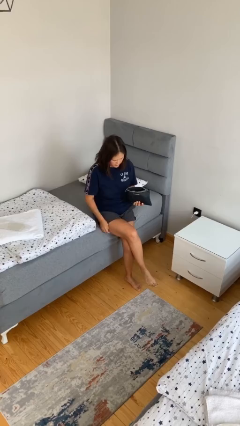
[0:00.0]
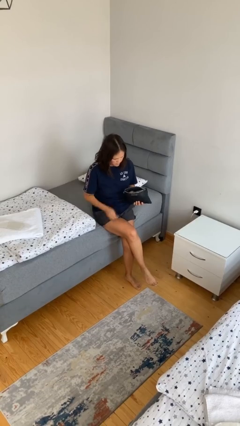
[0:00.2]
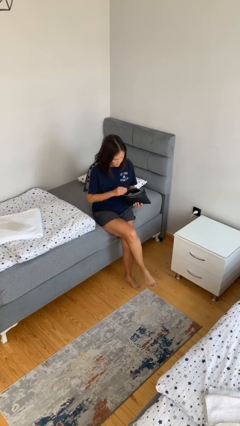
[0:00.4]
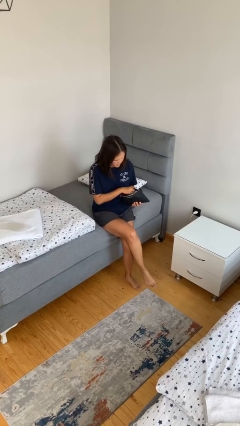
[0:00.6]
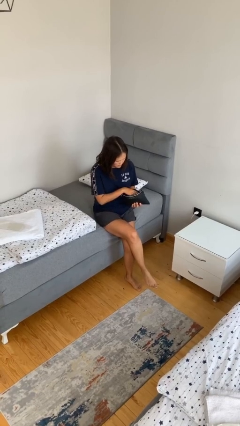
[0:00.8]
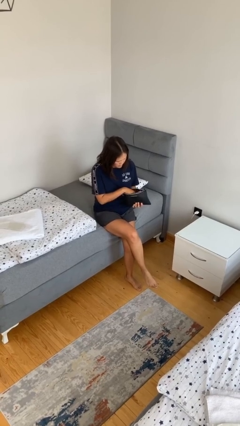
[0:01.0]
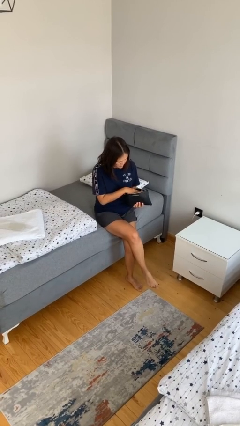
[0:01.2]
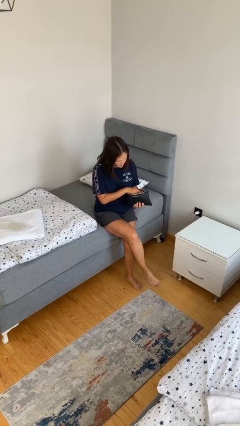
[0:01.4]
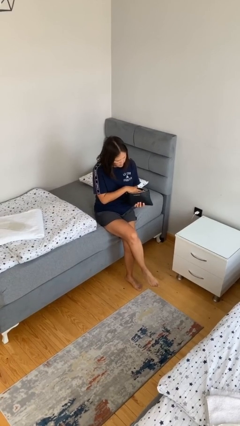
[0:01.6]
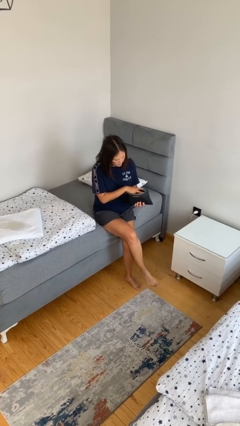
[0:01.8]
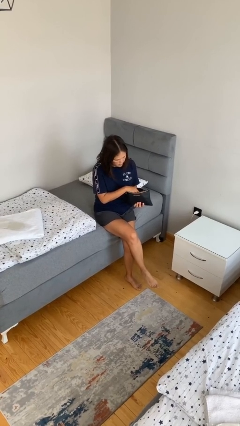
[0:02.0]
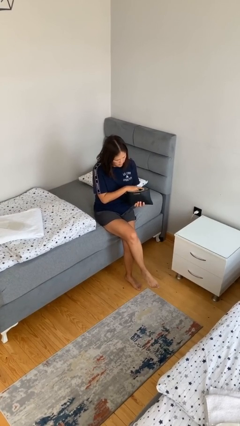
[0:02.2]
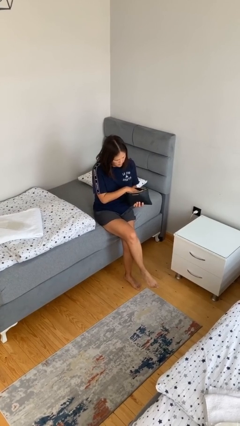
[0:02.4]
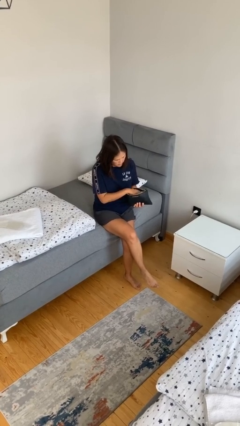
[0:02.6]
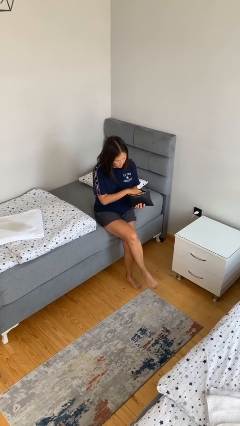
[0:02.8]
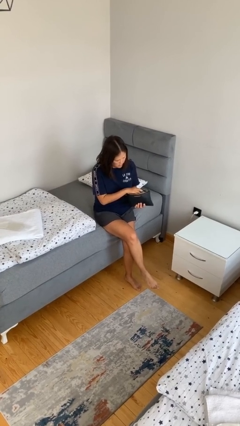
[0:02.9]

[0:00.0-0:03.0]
person searches in purse

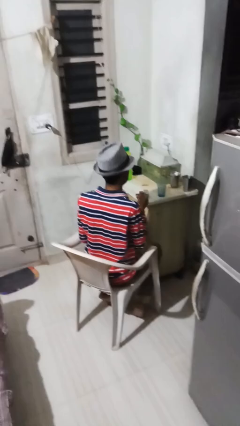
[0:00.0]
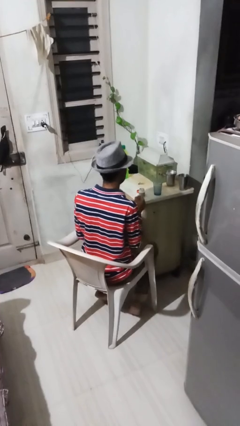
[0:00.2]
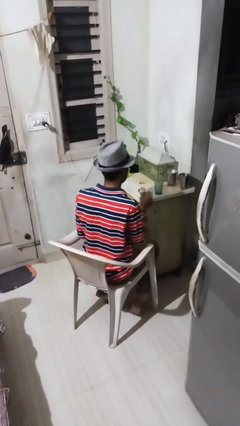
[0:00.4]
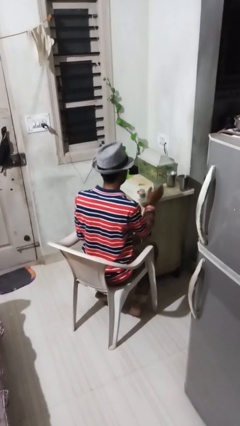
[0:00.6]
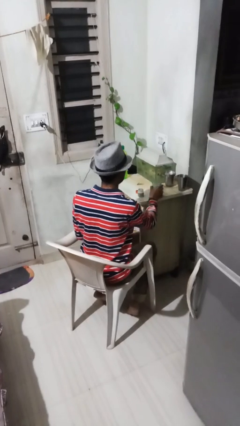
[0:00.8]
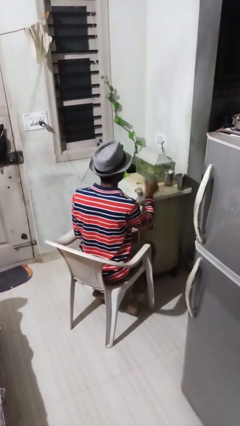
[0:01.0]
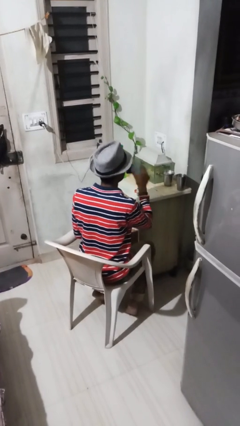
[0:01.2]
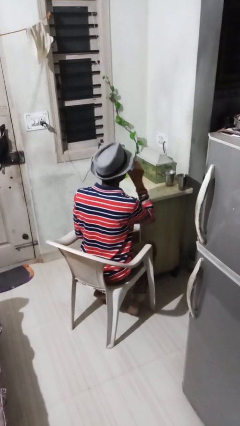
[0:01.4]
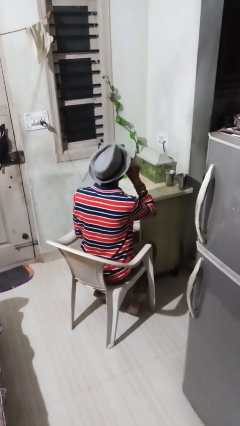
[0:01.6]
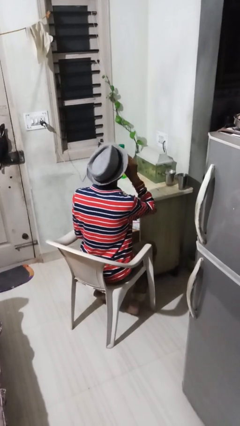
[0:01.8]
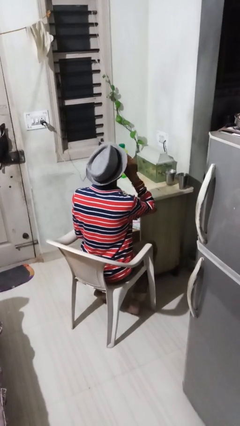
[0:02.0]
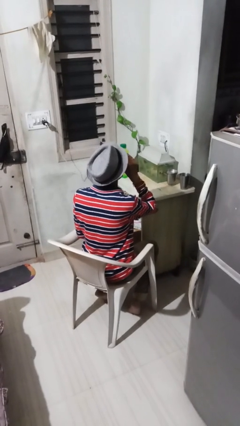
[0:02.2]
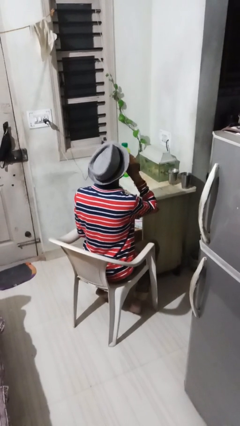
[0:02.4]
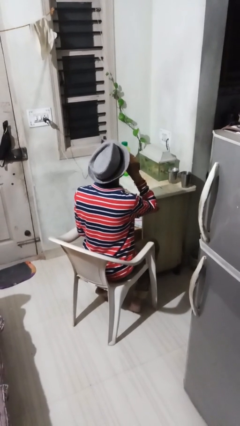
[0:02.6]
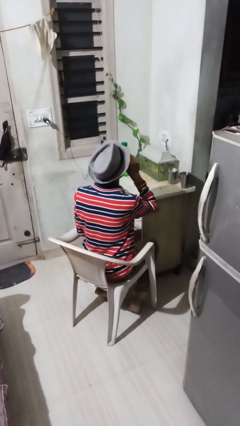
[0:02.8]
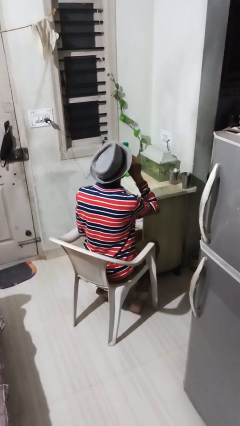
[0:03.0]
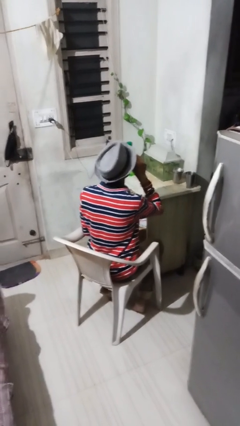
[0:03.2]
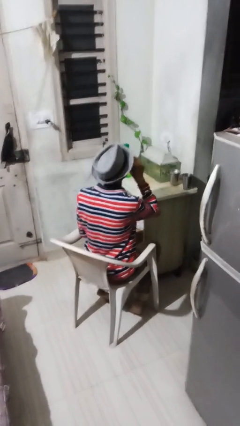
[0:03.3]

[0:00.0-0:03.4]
person drinks from cup

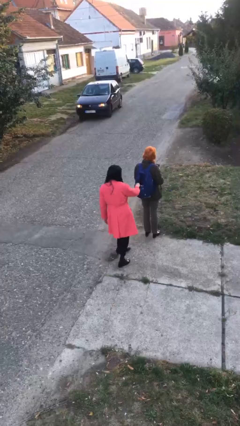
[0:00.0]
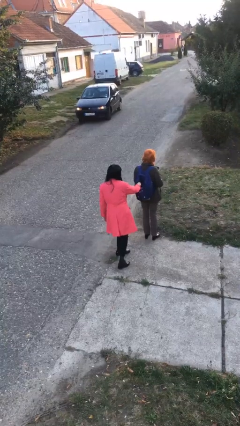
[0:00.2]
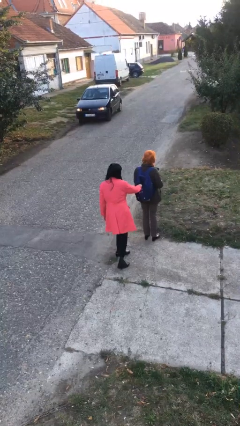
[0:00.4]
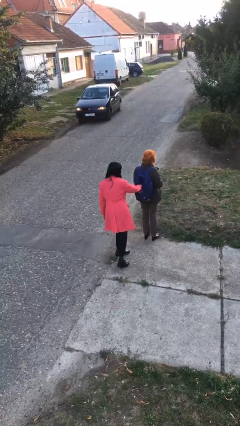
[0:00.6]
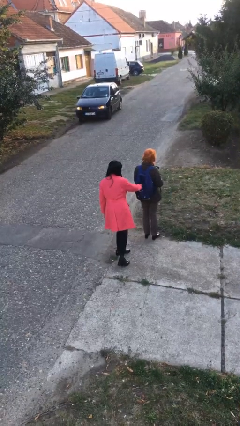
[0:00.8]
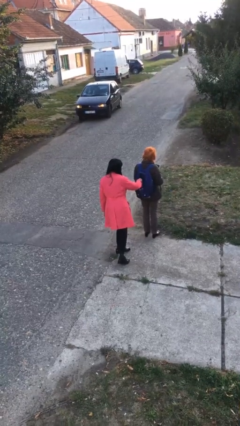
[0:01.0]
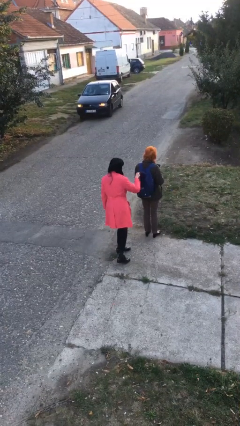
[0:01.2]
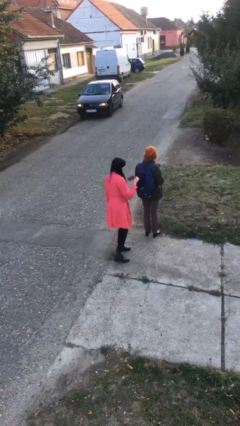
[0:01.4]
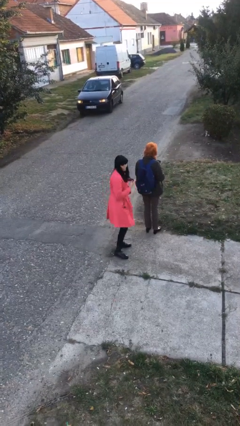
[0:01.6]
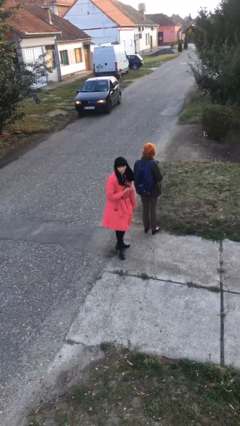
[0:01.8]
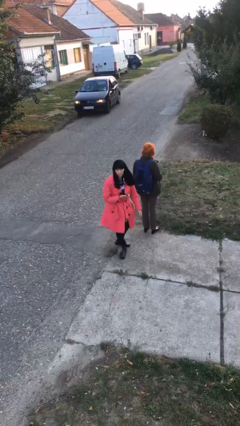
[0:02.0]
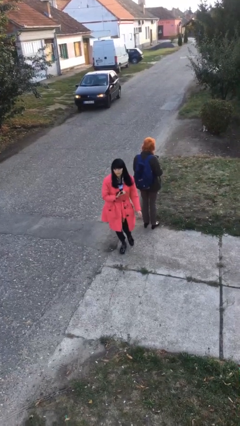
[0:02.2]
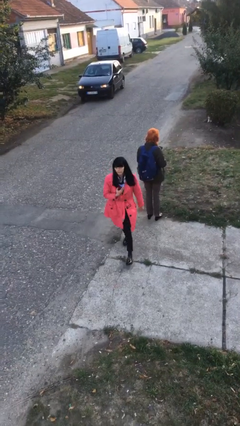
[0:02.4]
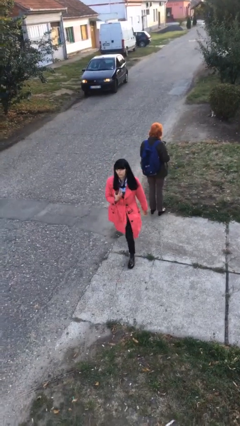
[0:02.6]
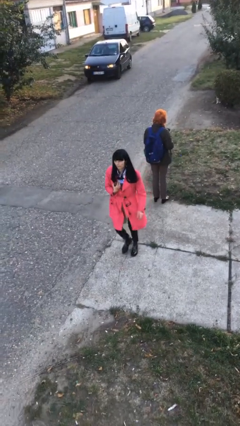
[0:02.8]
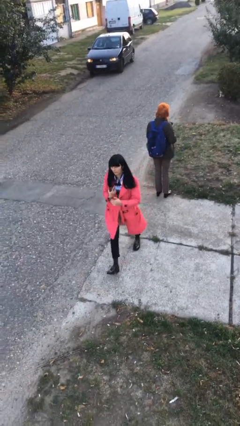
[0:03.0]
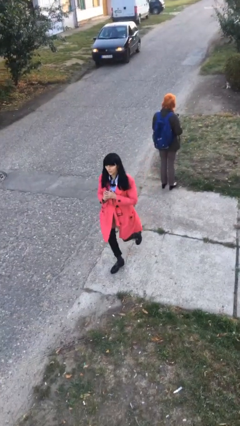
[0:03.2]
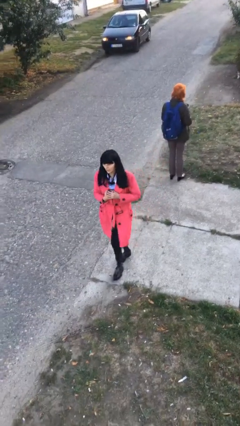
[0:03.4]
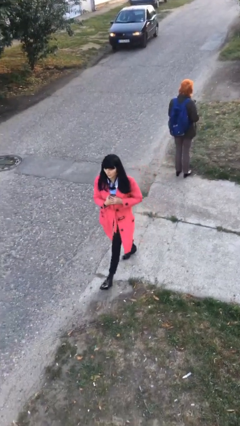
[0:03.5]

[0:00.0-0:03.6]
person steals object from person

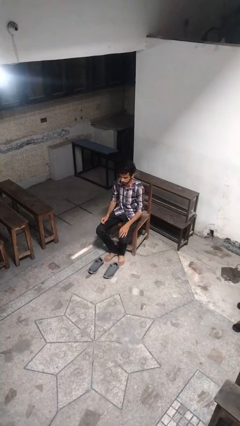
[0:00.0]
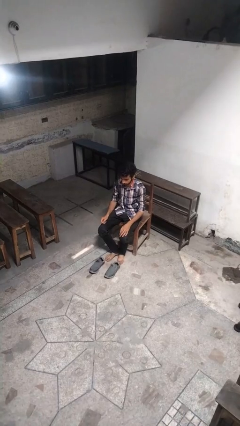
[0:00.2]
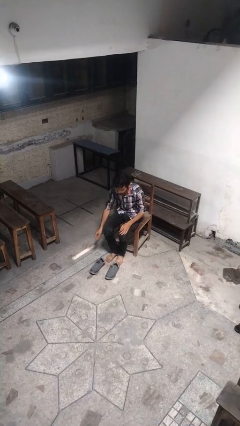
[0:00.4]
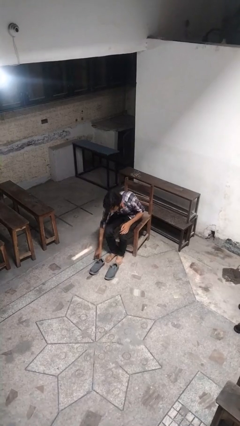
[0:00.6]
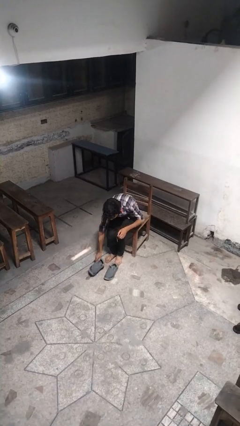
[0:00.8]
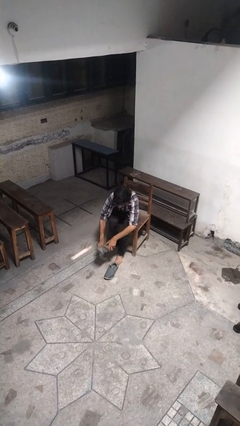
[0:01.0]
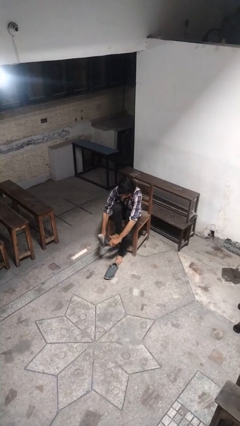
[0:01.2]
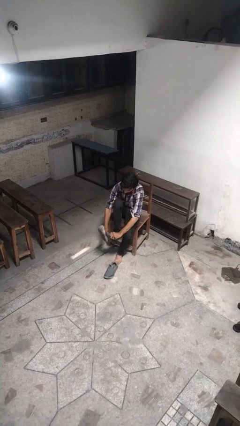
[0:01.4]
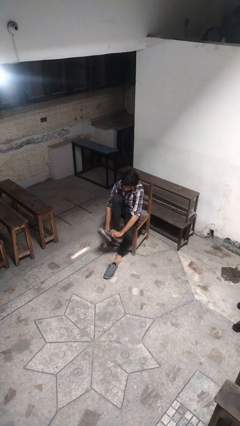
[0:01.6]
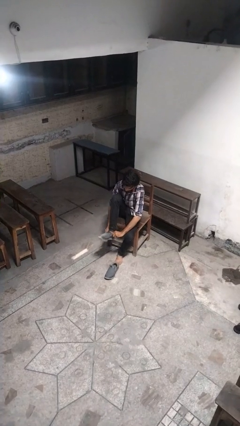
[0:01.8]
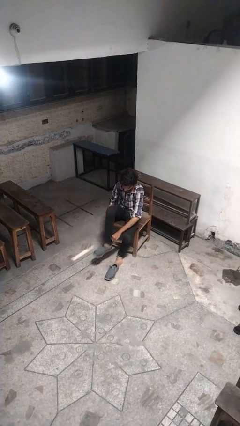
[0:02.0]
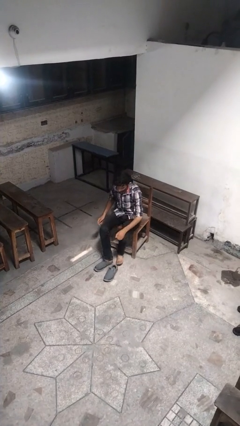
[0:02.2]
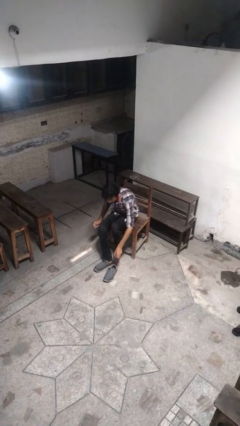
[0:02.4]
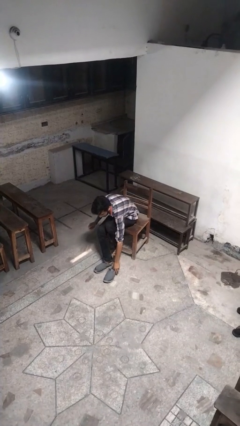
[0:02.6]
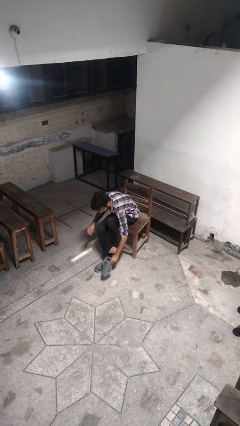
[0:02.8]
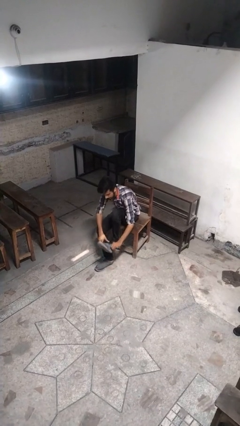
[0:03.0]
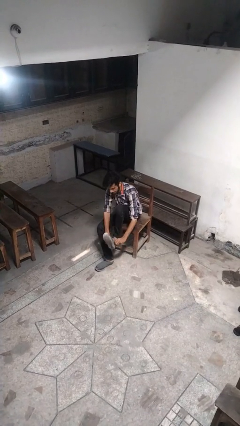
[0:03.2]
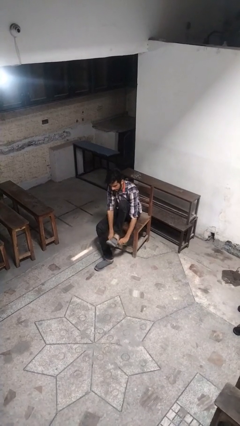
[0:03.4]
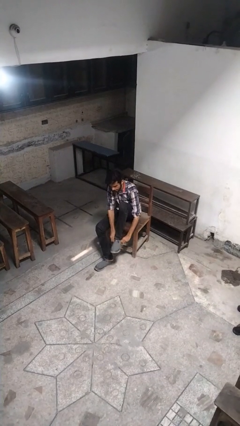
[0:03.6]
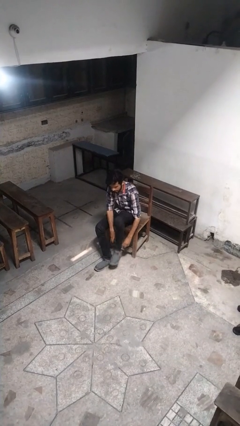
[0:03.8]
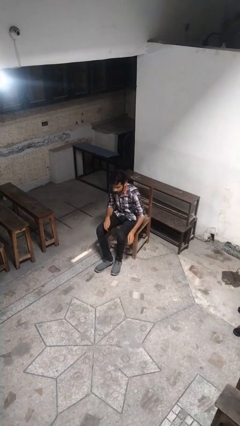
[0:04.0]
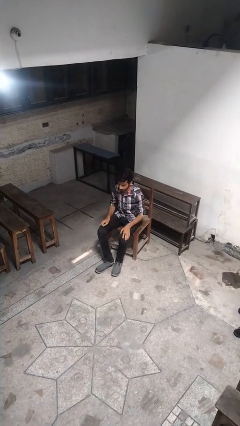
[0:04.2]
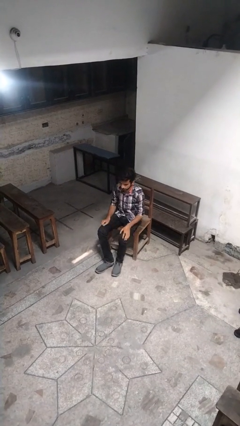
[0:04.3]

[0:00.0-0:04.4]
person puts on shoes

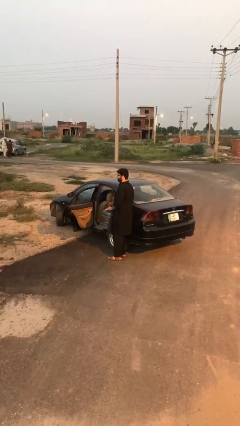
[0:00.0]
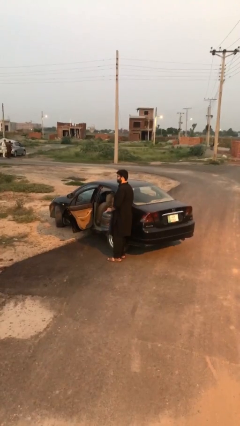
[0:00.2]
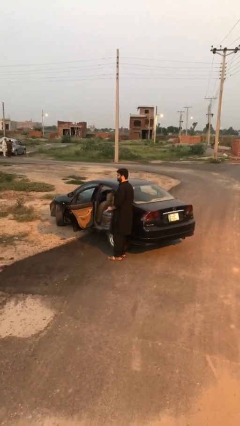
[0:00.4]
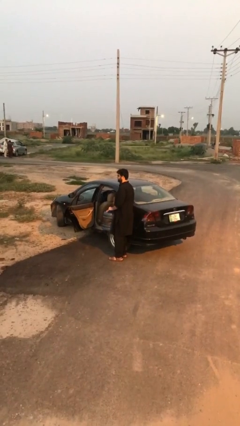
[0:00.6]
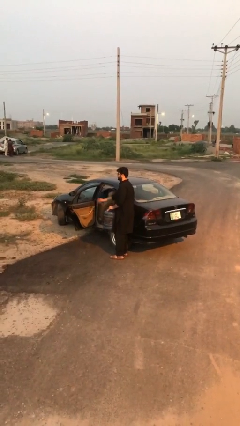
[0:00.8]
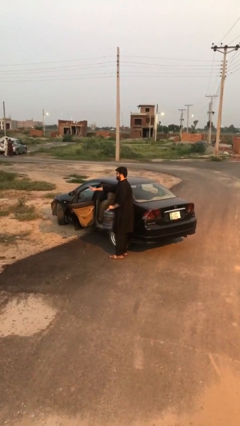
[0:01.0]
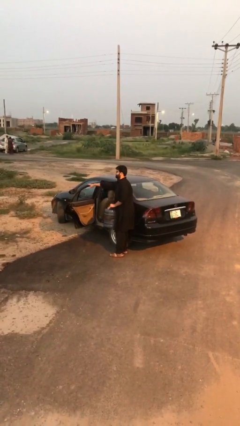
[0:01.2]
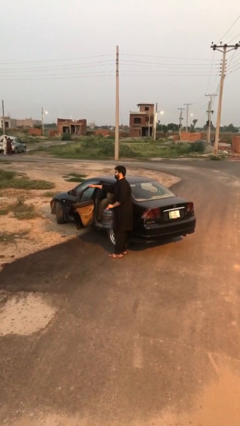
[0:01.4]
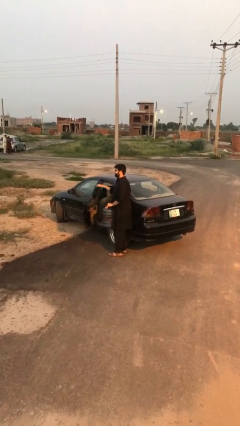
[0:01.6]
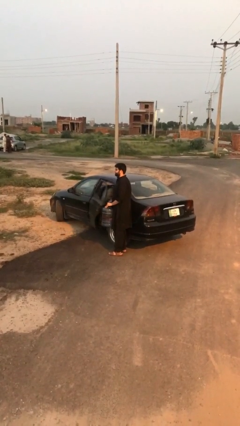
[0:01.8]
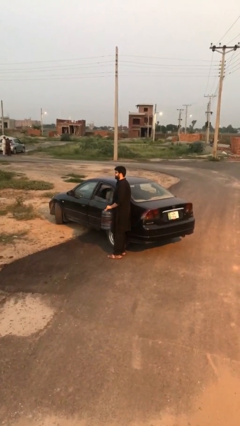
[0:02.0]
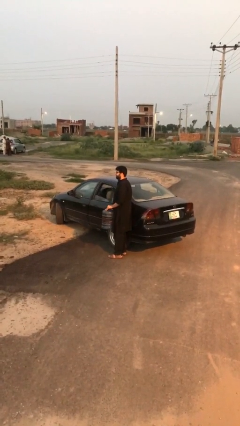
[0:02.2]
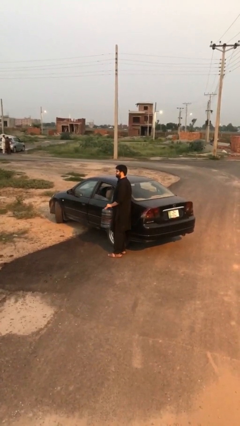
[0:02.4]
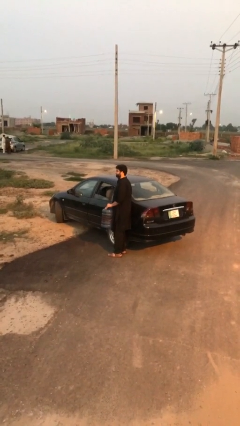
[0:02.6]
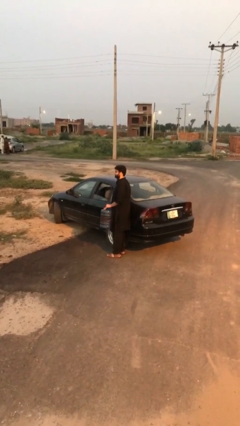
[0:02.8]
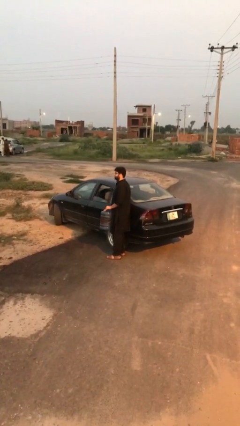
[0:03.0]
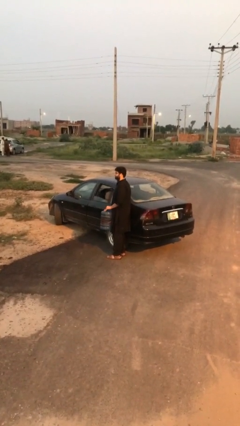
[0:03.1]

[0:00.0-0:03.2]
person closes car door
